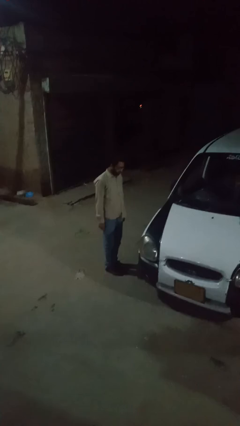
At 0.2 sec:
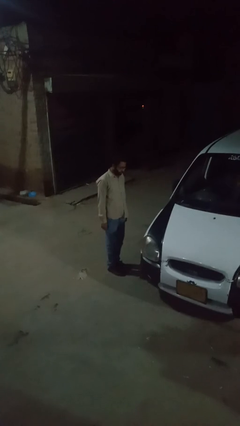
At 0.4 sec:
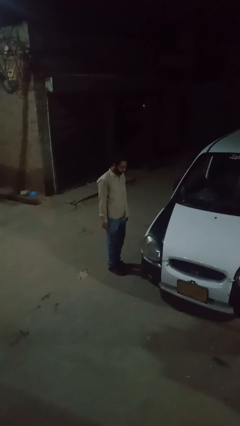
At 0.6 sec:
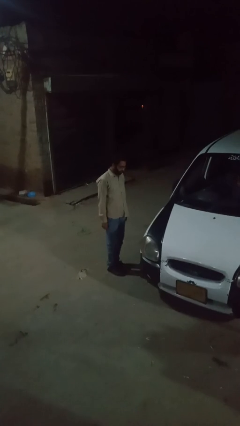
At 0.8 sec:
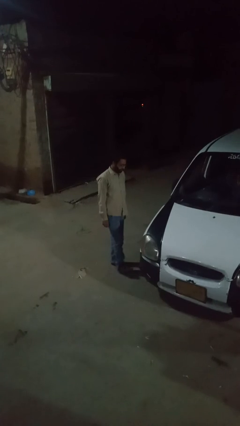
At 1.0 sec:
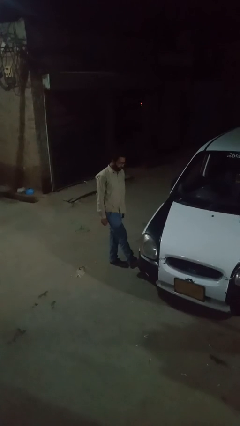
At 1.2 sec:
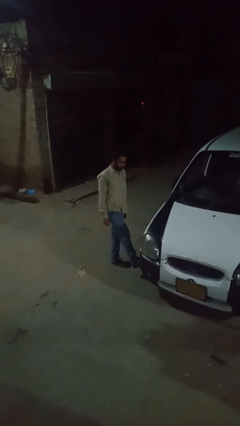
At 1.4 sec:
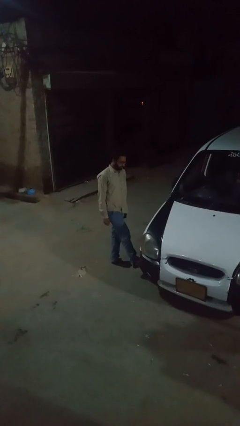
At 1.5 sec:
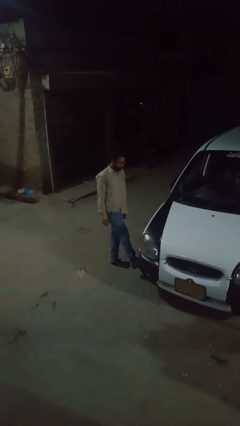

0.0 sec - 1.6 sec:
person kicks car tires

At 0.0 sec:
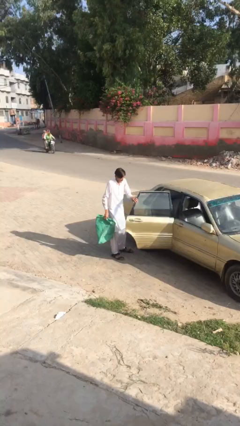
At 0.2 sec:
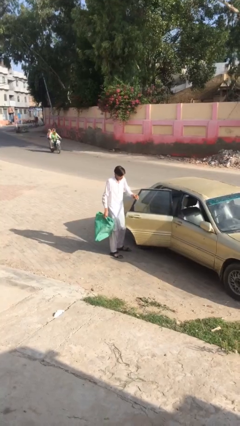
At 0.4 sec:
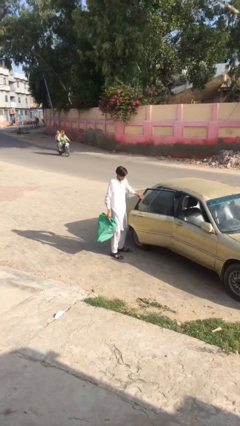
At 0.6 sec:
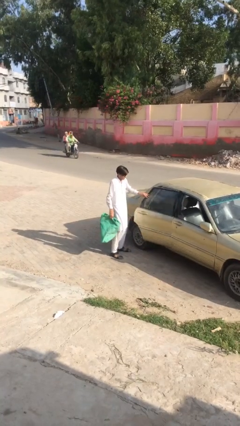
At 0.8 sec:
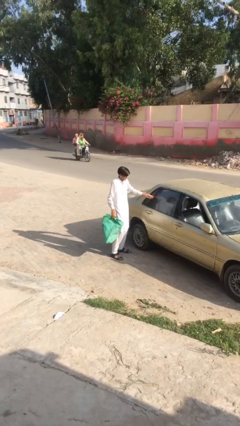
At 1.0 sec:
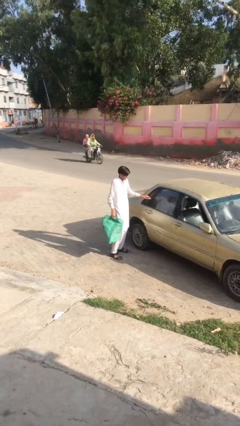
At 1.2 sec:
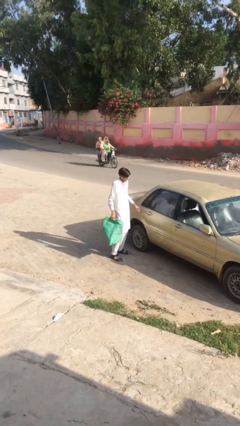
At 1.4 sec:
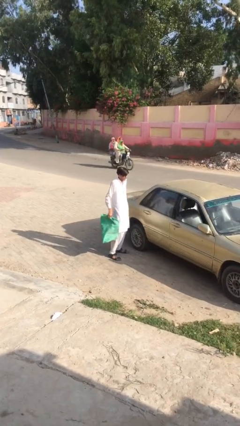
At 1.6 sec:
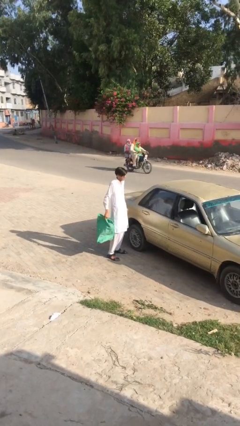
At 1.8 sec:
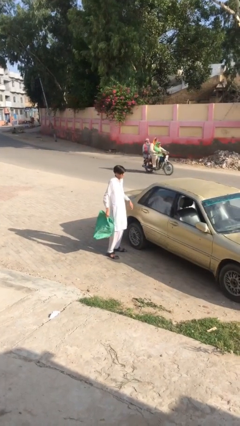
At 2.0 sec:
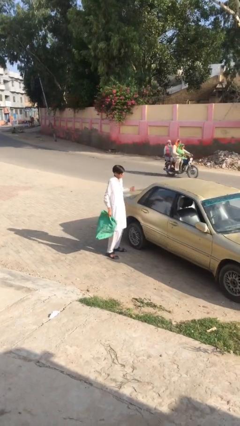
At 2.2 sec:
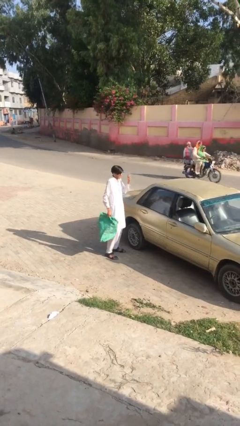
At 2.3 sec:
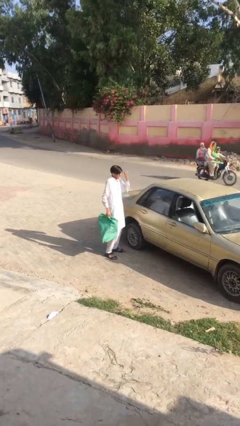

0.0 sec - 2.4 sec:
person closes car door

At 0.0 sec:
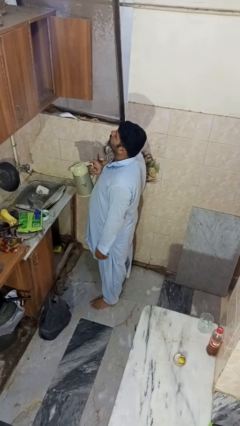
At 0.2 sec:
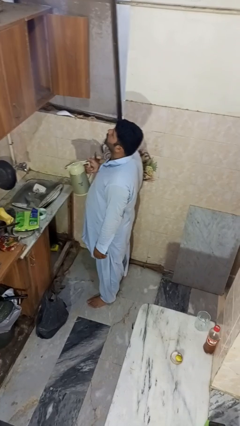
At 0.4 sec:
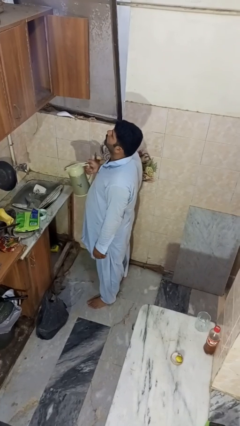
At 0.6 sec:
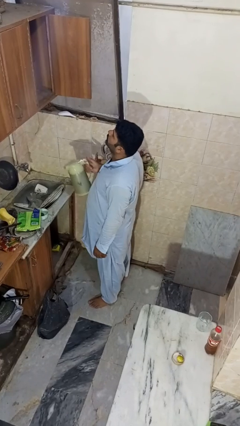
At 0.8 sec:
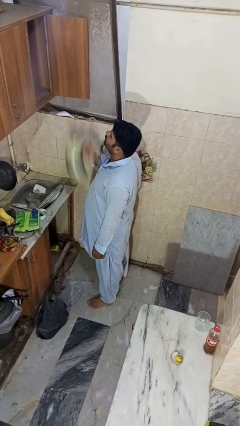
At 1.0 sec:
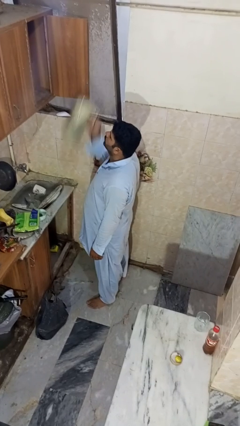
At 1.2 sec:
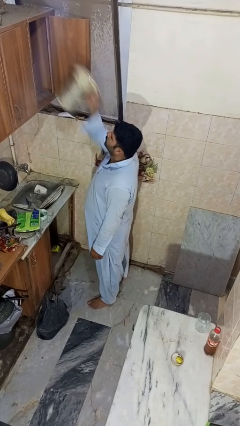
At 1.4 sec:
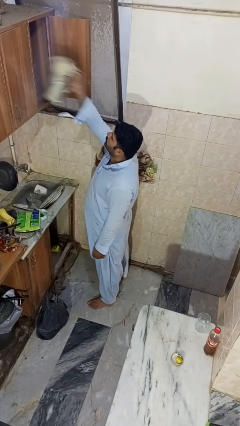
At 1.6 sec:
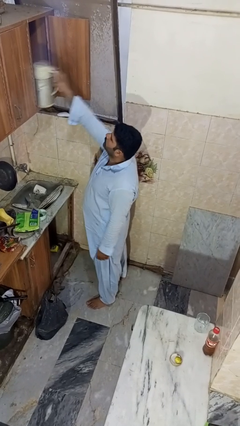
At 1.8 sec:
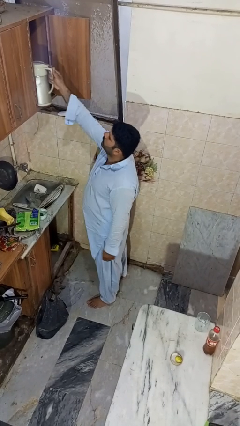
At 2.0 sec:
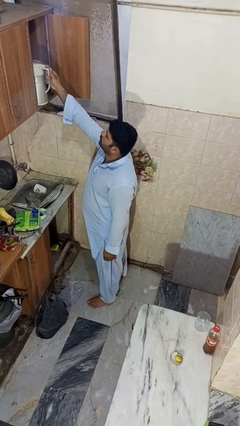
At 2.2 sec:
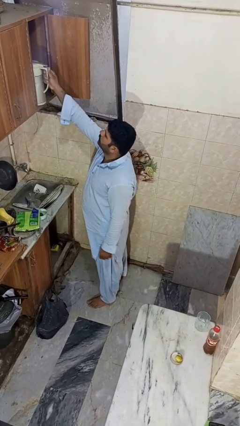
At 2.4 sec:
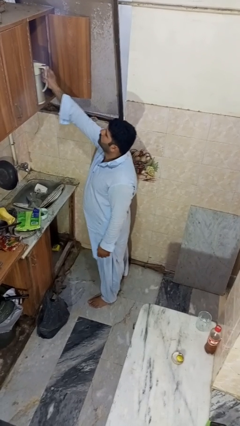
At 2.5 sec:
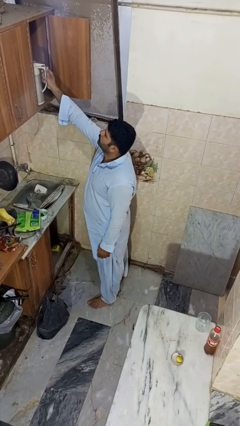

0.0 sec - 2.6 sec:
person puts object in cabinet

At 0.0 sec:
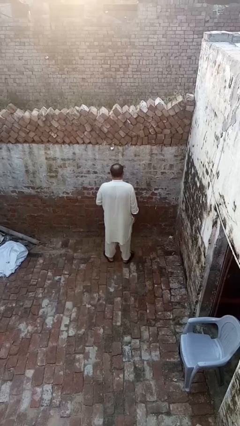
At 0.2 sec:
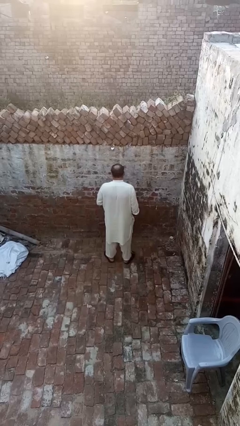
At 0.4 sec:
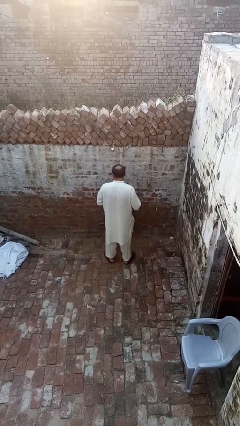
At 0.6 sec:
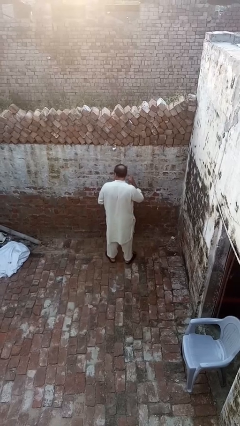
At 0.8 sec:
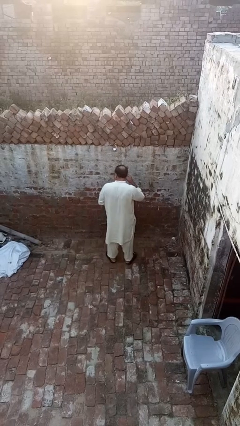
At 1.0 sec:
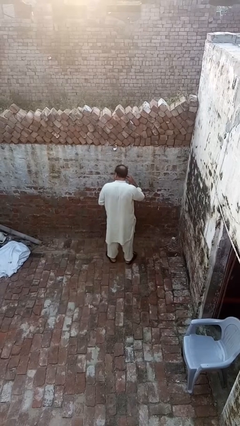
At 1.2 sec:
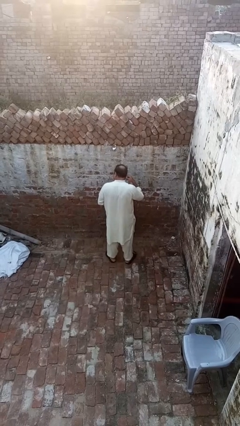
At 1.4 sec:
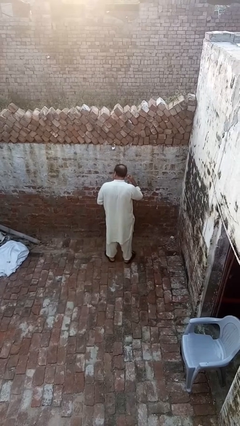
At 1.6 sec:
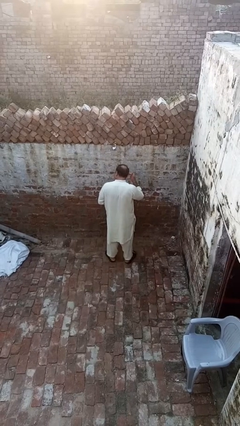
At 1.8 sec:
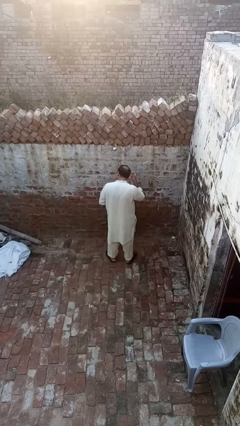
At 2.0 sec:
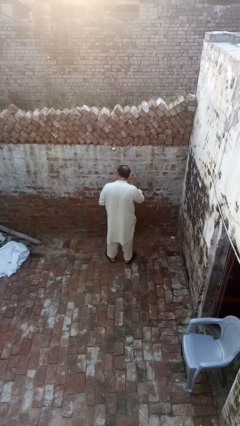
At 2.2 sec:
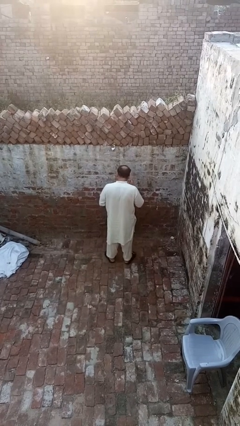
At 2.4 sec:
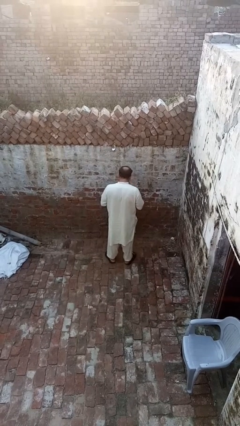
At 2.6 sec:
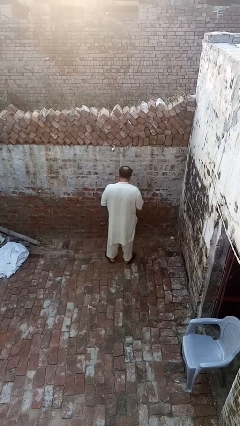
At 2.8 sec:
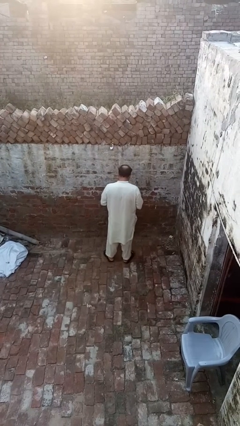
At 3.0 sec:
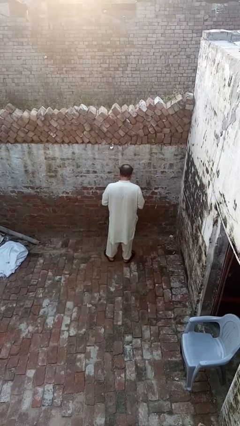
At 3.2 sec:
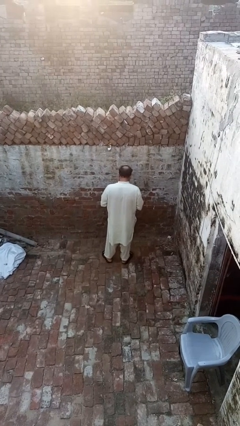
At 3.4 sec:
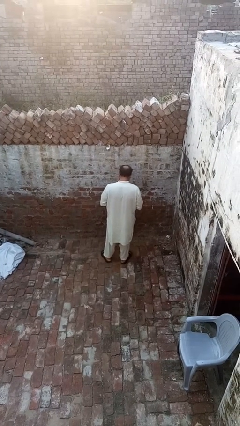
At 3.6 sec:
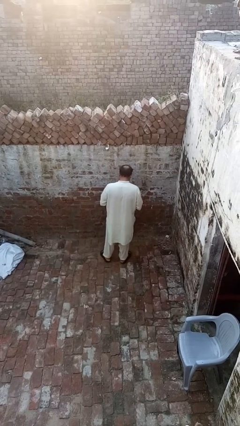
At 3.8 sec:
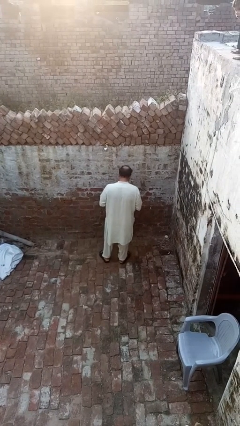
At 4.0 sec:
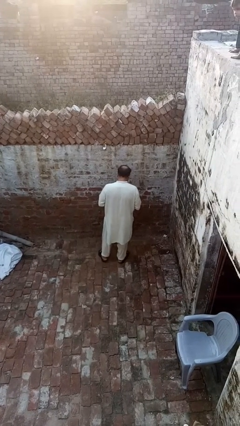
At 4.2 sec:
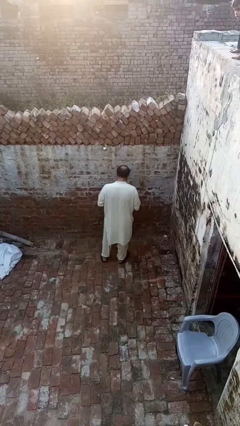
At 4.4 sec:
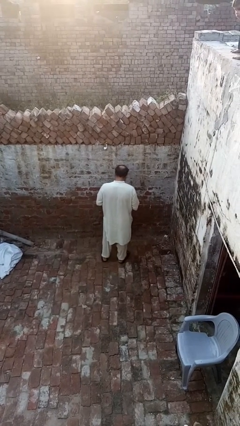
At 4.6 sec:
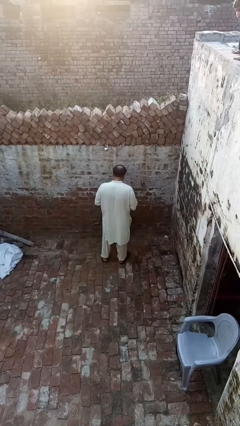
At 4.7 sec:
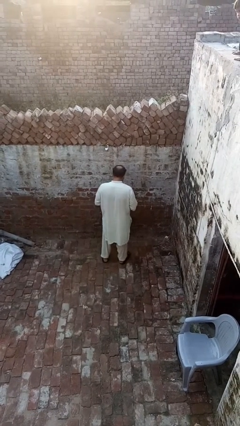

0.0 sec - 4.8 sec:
person takes off earrings

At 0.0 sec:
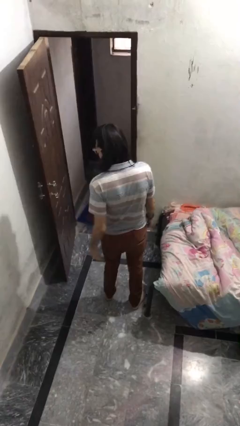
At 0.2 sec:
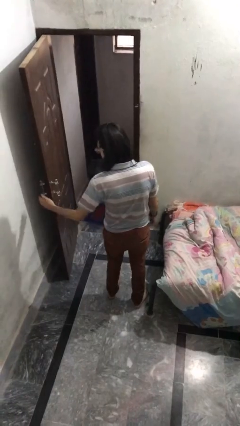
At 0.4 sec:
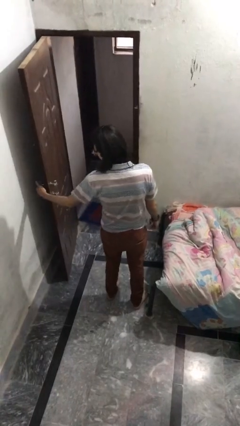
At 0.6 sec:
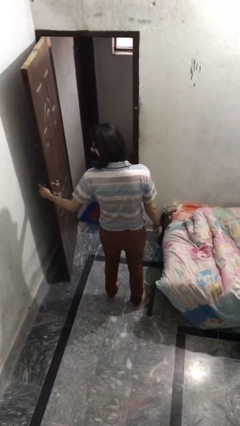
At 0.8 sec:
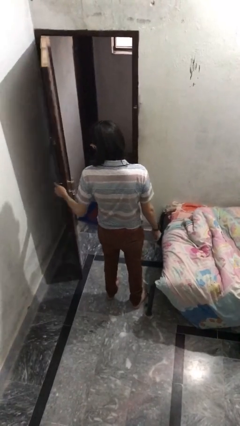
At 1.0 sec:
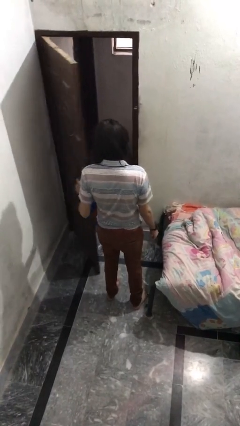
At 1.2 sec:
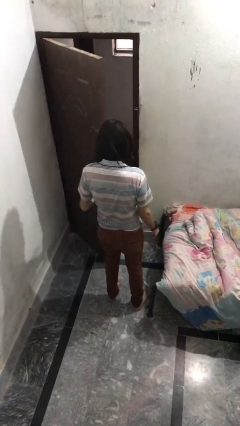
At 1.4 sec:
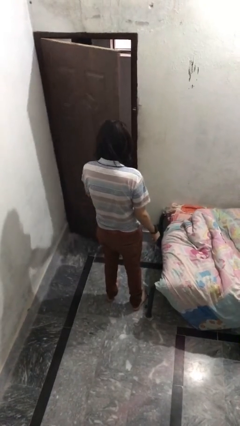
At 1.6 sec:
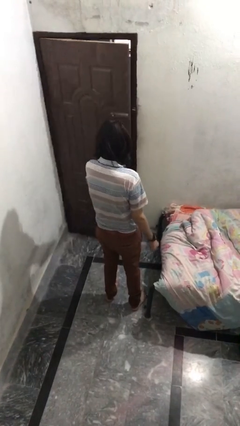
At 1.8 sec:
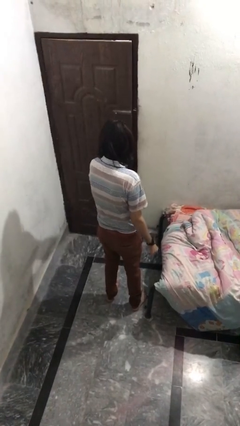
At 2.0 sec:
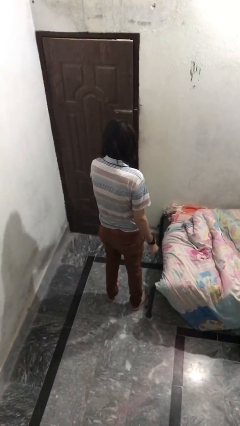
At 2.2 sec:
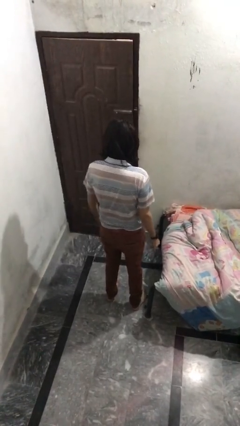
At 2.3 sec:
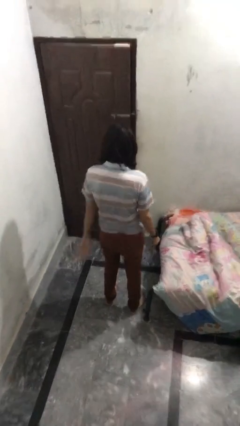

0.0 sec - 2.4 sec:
person closes facility door

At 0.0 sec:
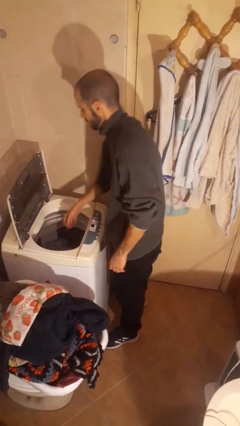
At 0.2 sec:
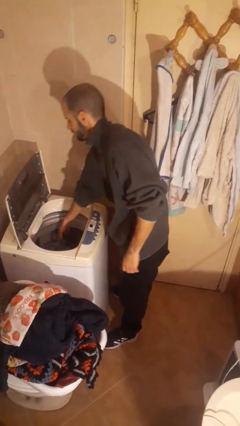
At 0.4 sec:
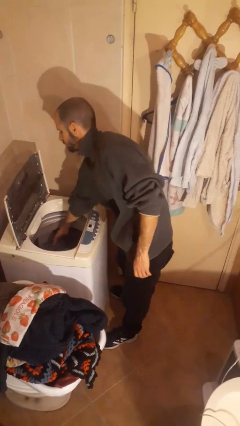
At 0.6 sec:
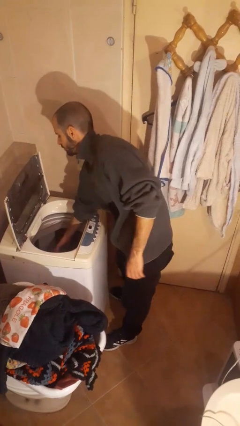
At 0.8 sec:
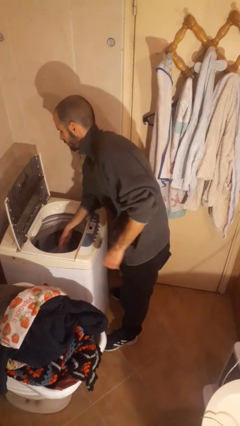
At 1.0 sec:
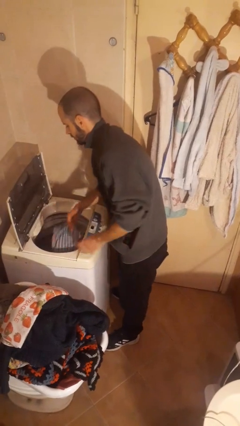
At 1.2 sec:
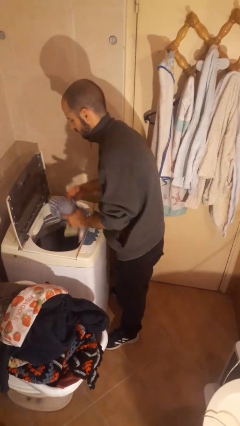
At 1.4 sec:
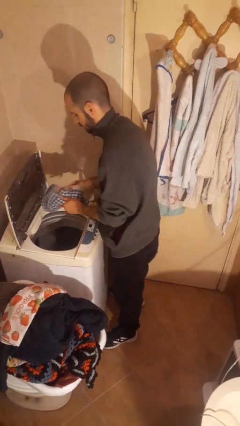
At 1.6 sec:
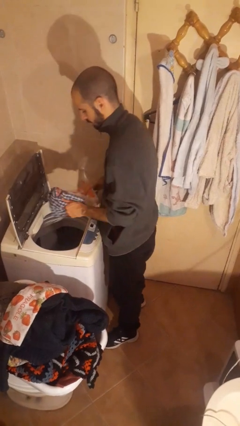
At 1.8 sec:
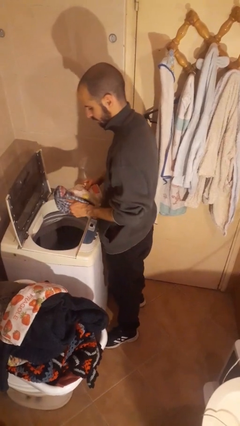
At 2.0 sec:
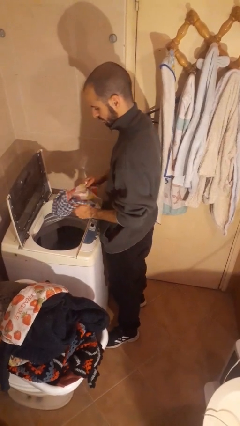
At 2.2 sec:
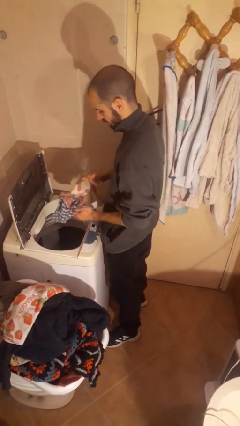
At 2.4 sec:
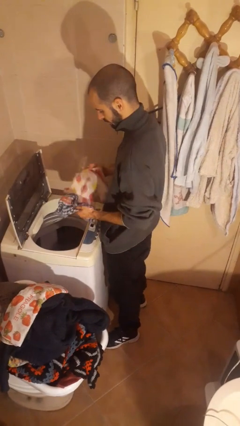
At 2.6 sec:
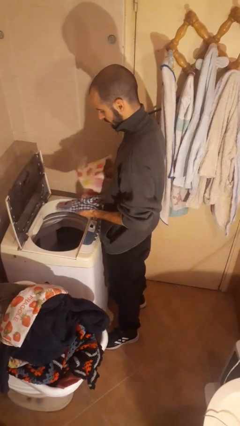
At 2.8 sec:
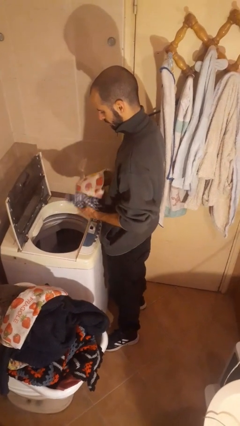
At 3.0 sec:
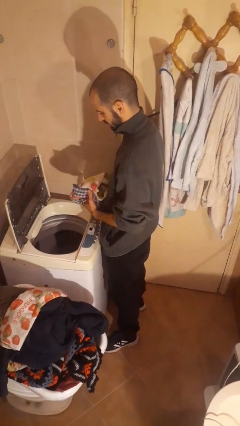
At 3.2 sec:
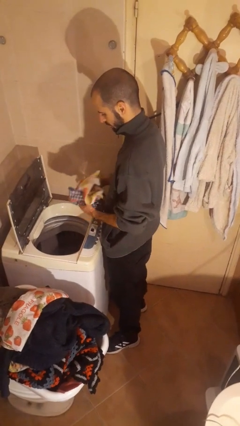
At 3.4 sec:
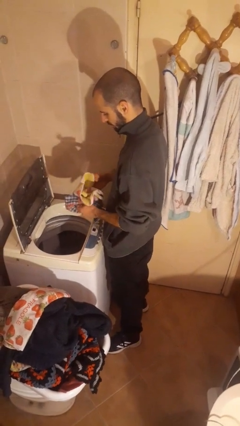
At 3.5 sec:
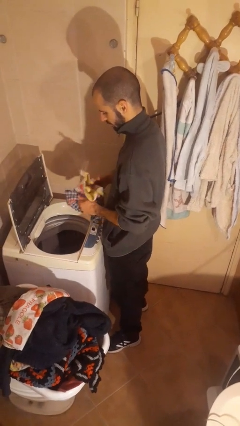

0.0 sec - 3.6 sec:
person loads clotheswasher
